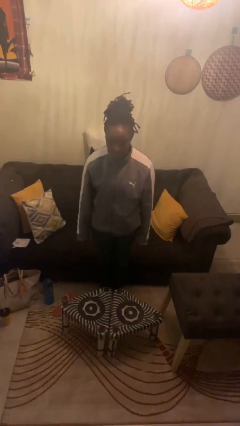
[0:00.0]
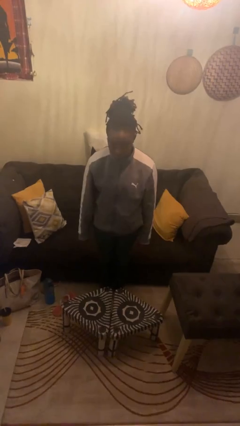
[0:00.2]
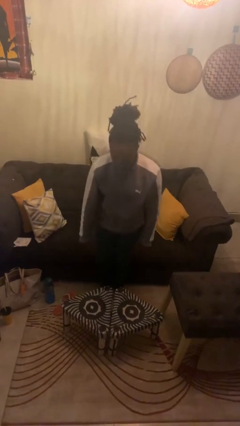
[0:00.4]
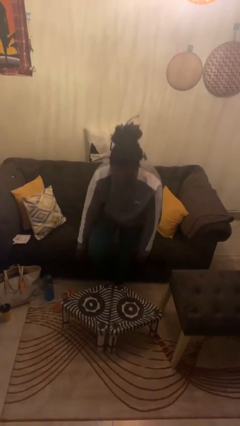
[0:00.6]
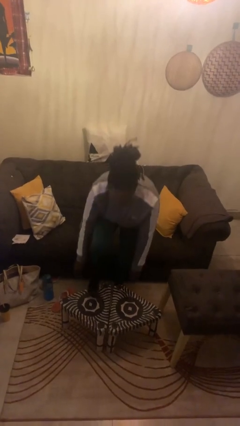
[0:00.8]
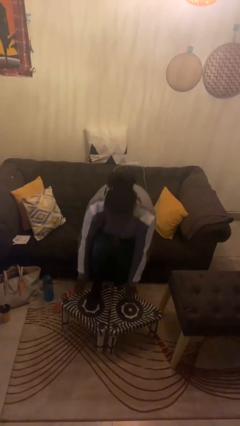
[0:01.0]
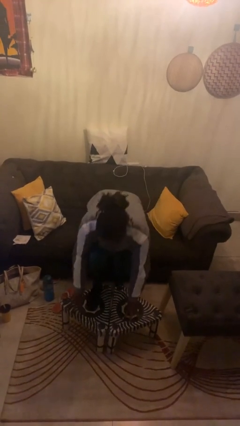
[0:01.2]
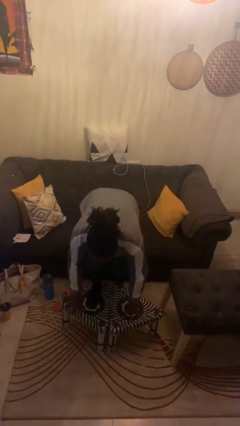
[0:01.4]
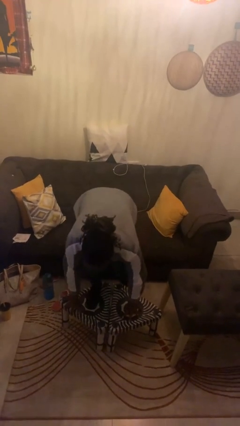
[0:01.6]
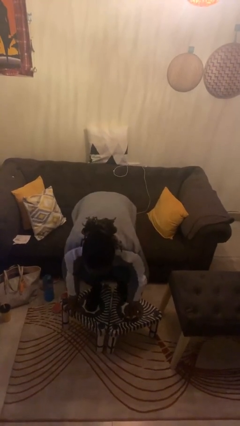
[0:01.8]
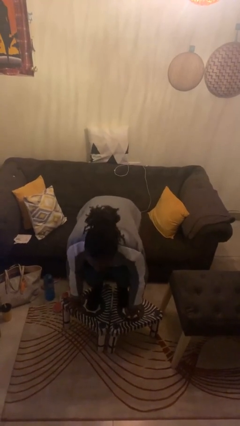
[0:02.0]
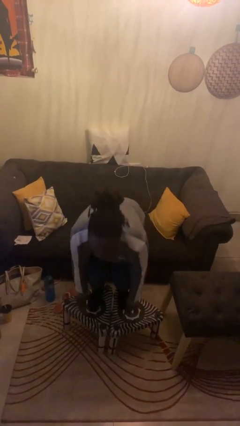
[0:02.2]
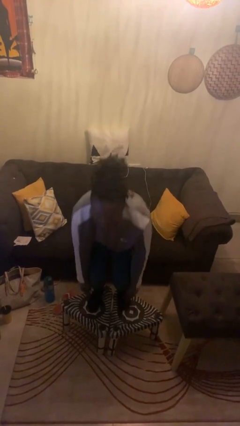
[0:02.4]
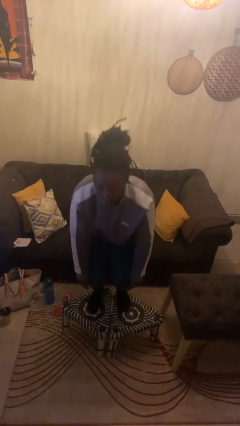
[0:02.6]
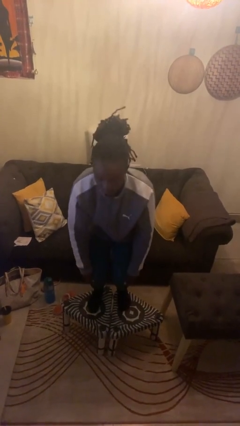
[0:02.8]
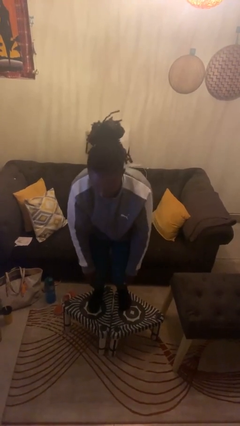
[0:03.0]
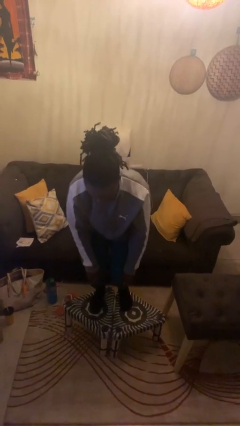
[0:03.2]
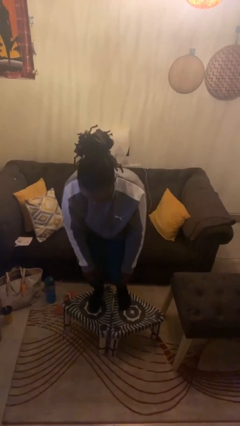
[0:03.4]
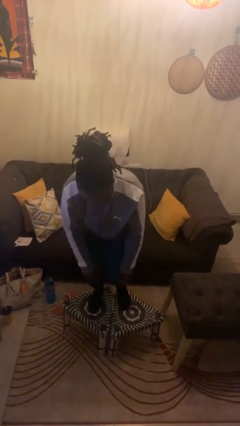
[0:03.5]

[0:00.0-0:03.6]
person climbs on table

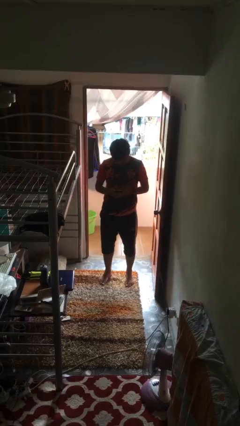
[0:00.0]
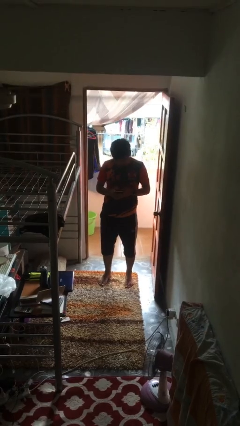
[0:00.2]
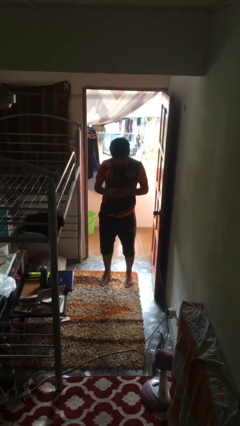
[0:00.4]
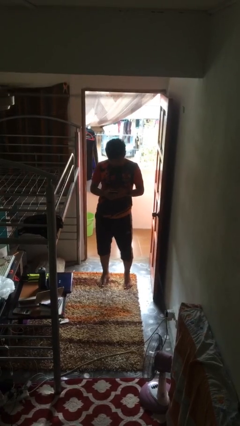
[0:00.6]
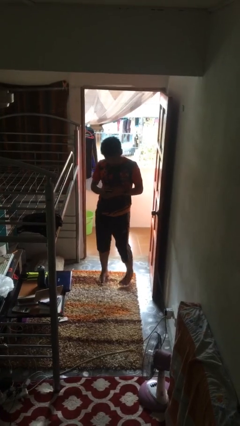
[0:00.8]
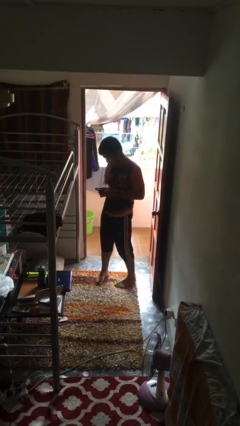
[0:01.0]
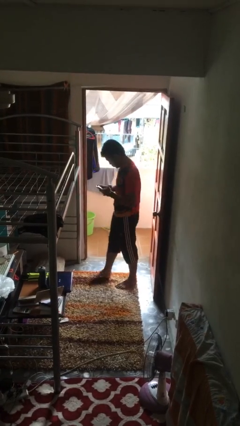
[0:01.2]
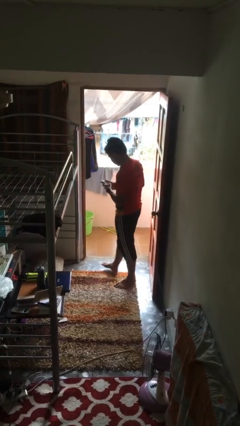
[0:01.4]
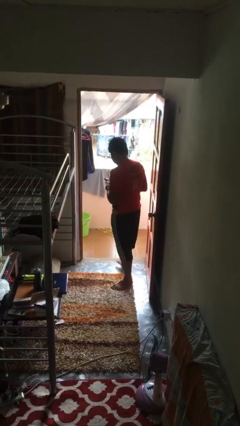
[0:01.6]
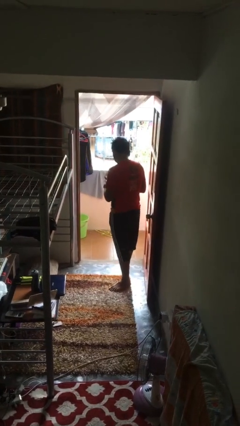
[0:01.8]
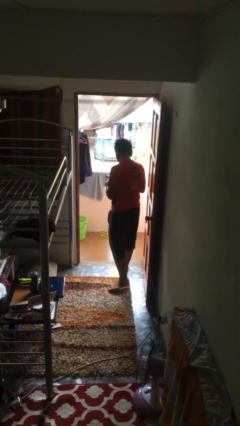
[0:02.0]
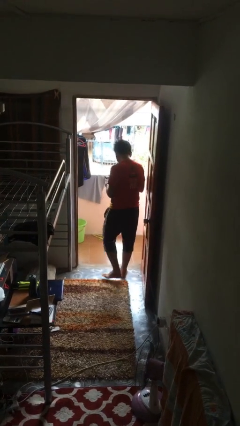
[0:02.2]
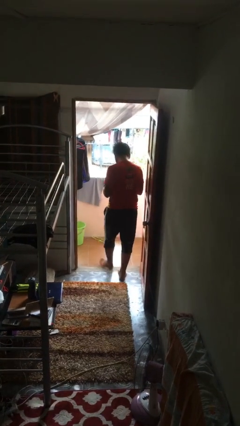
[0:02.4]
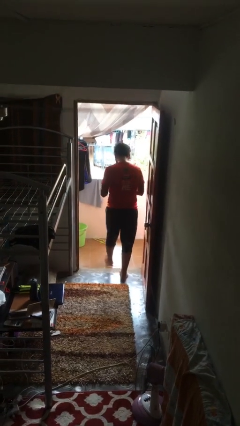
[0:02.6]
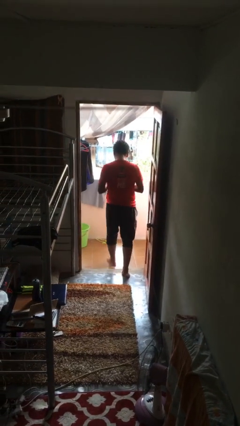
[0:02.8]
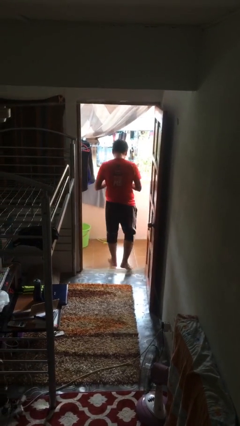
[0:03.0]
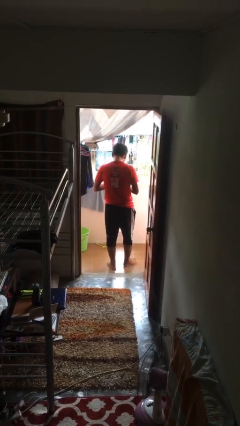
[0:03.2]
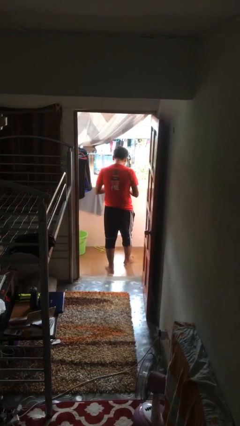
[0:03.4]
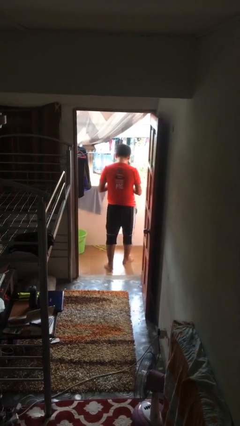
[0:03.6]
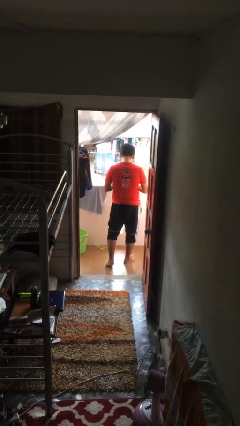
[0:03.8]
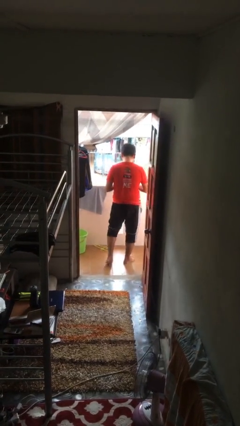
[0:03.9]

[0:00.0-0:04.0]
person exits scene through structure

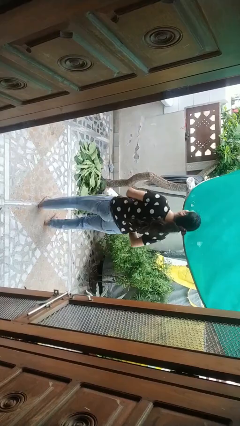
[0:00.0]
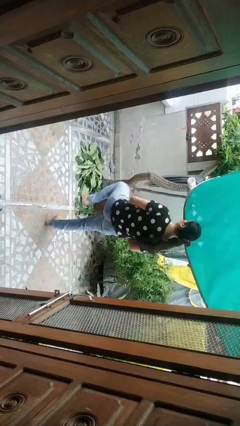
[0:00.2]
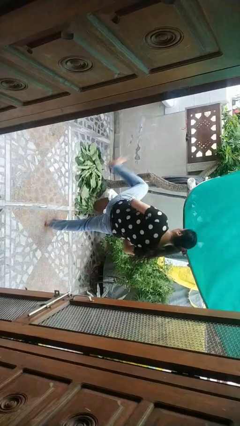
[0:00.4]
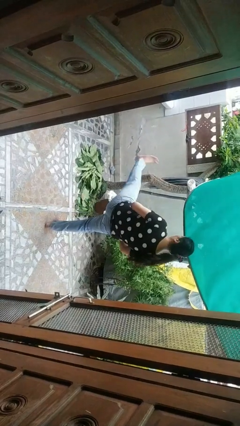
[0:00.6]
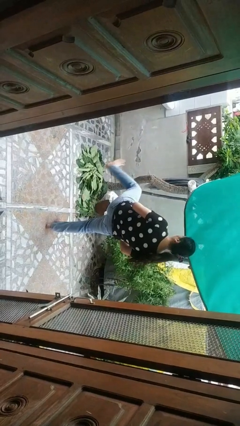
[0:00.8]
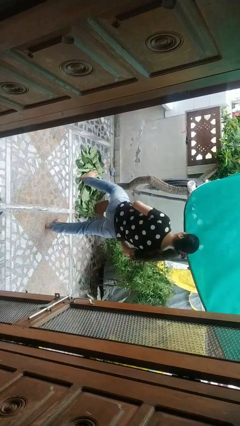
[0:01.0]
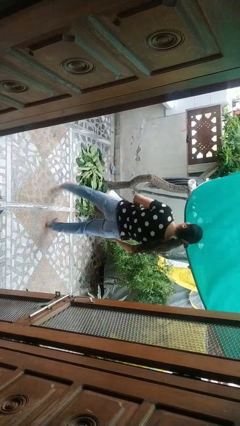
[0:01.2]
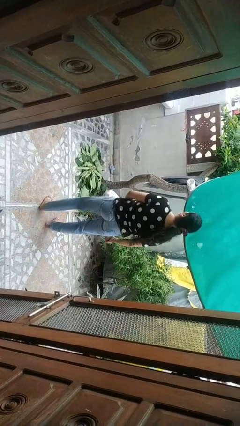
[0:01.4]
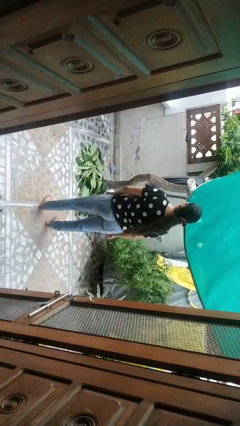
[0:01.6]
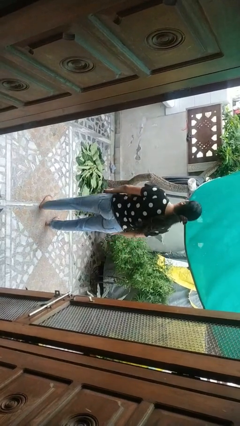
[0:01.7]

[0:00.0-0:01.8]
person karate kicks

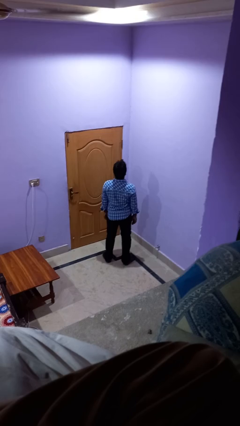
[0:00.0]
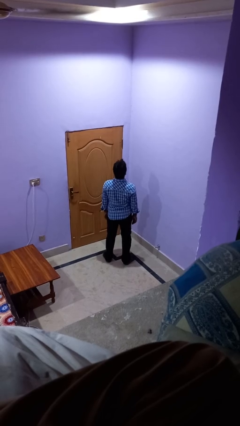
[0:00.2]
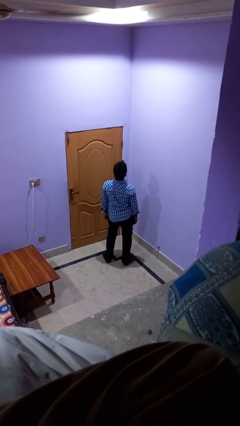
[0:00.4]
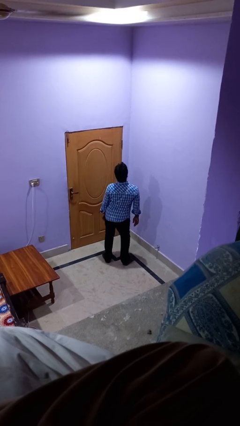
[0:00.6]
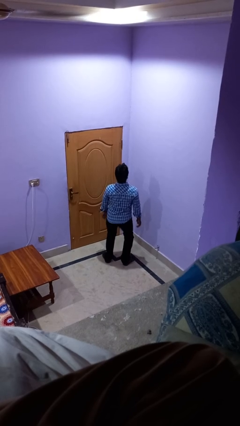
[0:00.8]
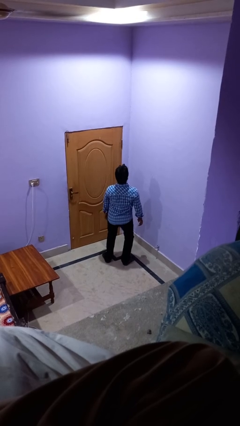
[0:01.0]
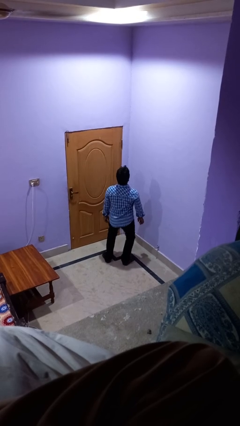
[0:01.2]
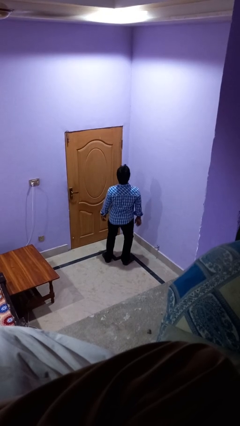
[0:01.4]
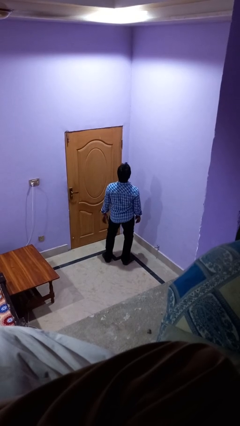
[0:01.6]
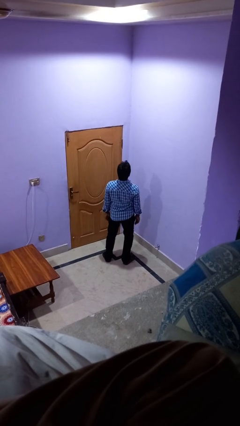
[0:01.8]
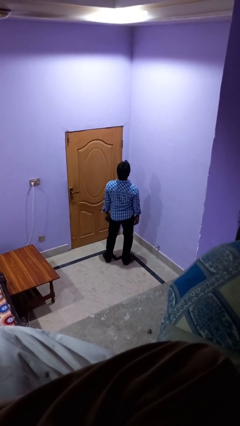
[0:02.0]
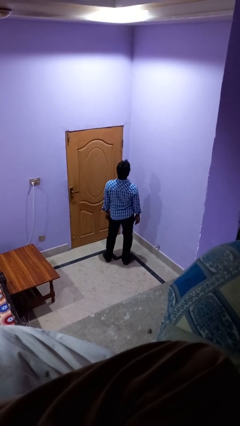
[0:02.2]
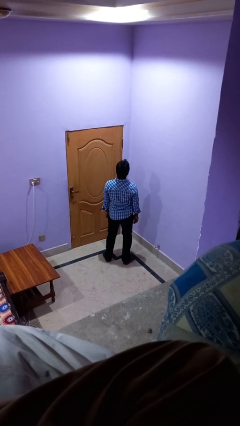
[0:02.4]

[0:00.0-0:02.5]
person wiggles hips

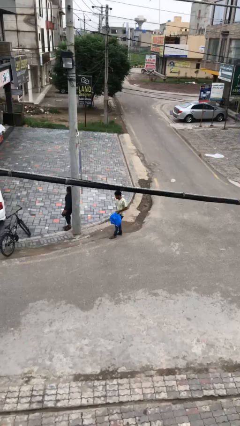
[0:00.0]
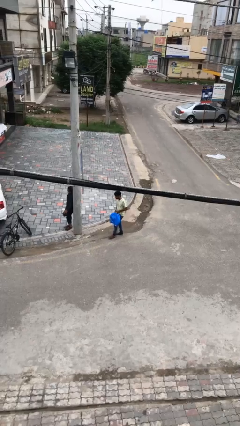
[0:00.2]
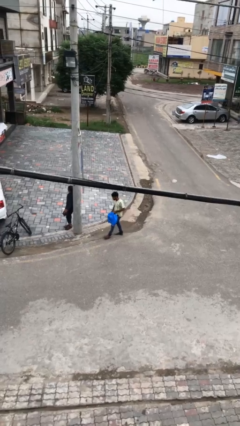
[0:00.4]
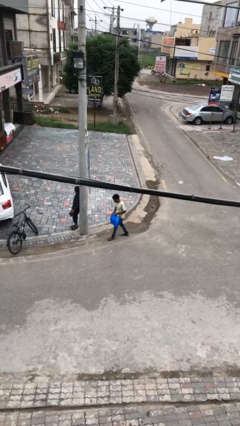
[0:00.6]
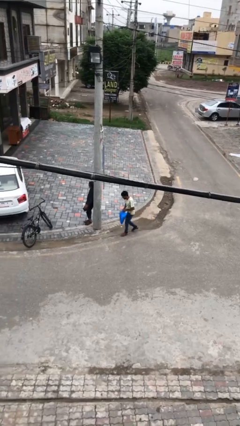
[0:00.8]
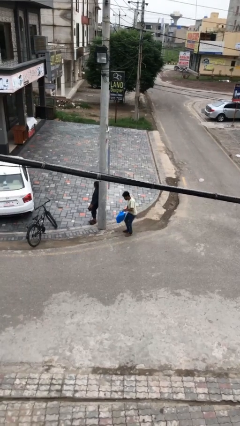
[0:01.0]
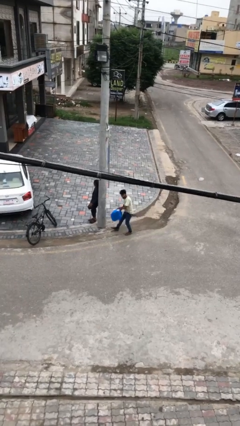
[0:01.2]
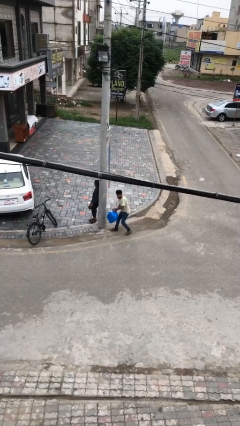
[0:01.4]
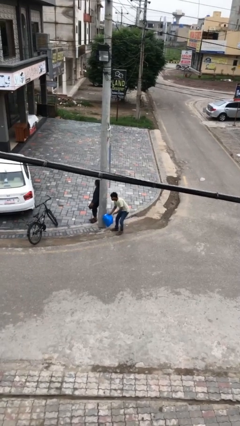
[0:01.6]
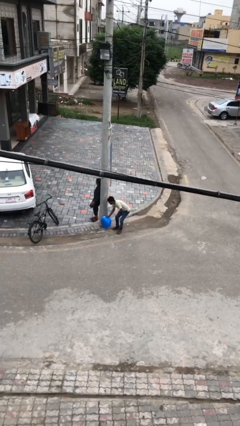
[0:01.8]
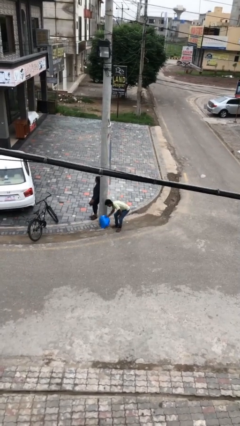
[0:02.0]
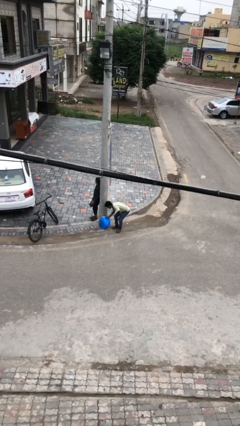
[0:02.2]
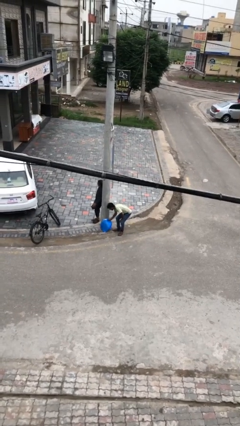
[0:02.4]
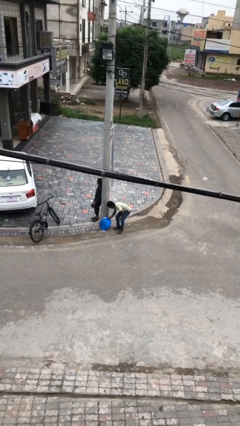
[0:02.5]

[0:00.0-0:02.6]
person puts down object on floor

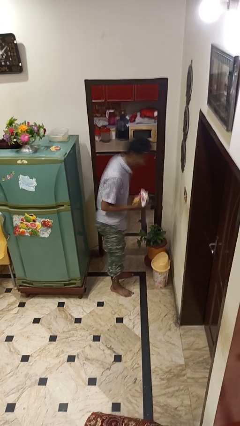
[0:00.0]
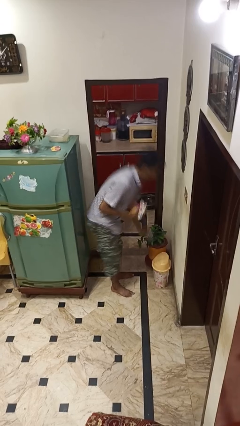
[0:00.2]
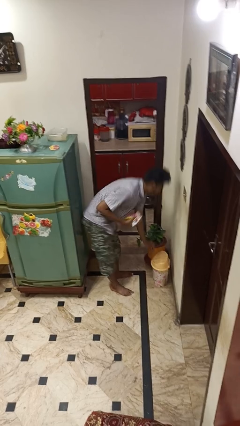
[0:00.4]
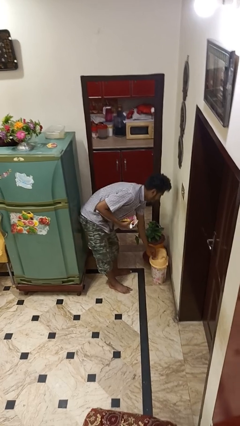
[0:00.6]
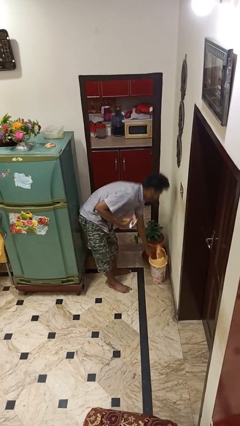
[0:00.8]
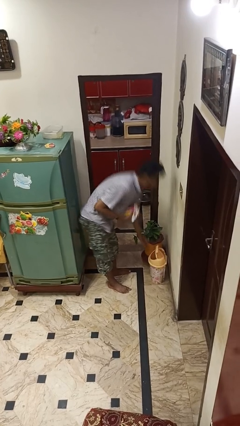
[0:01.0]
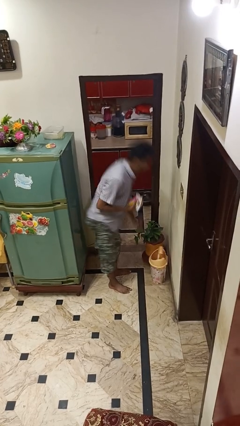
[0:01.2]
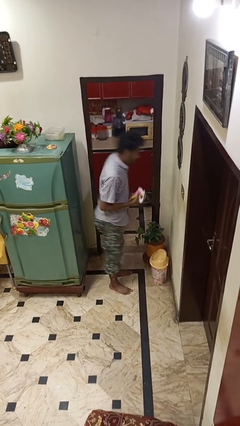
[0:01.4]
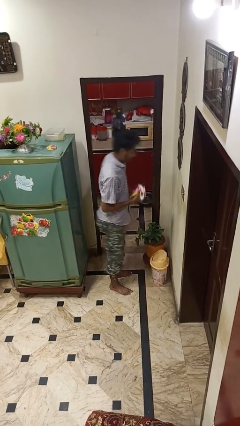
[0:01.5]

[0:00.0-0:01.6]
person discards trash

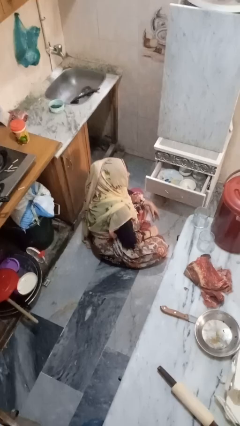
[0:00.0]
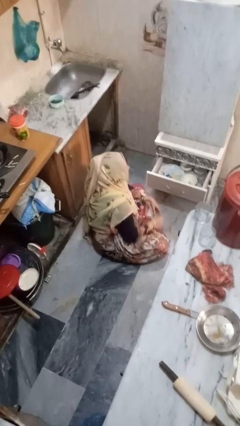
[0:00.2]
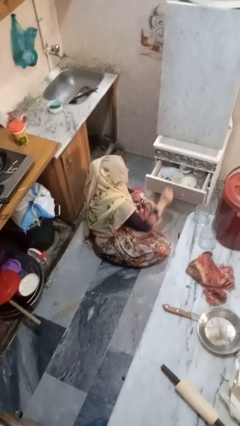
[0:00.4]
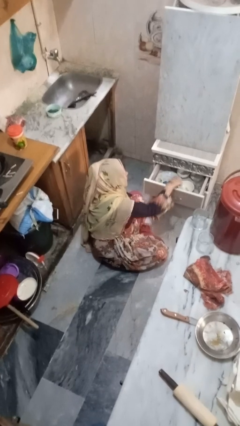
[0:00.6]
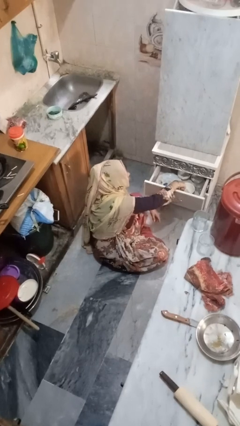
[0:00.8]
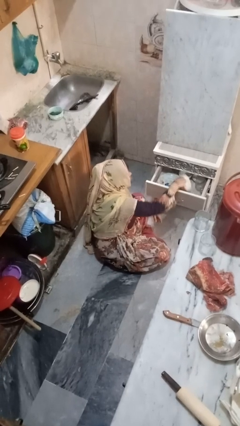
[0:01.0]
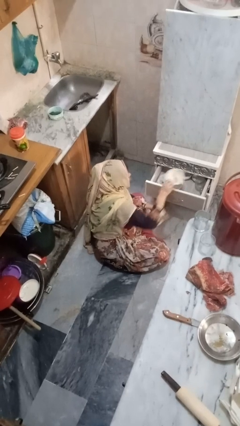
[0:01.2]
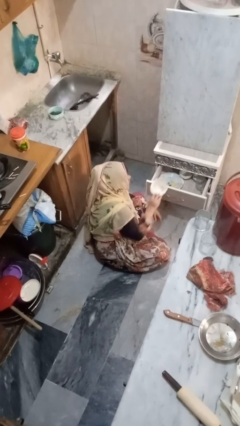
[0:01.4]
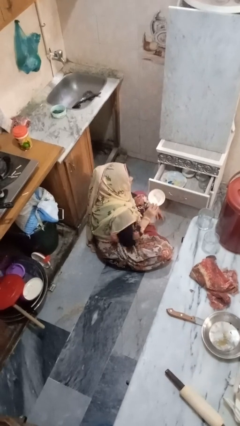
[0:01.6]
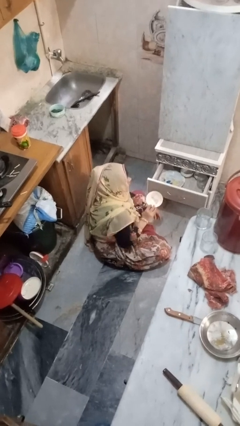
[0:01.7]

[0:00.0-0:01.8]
person takes object from kitchen drawer
